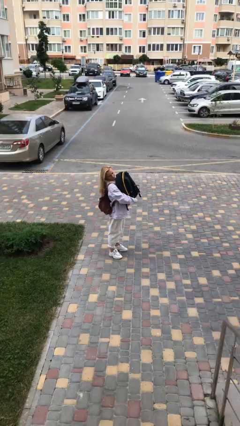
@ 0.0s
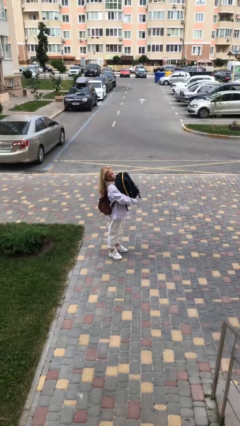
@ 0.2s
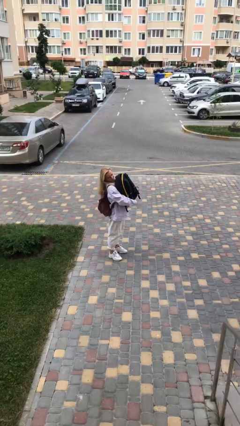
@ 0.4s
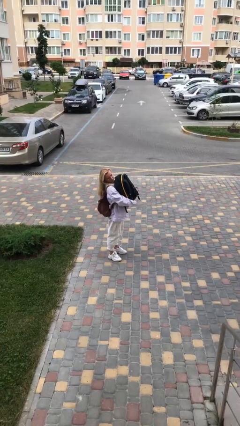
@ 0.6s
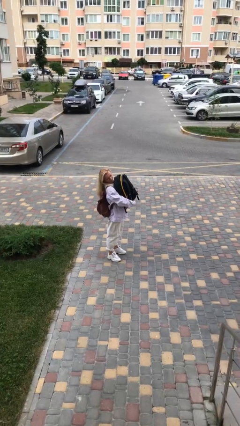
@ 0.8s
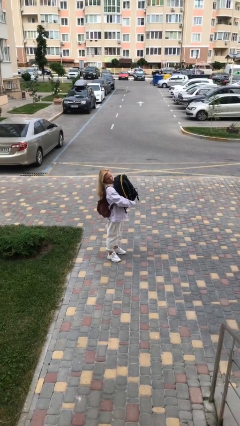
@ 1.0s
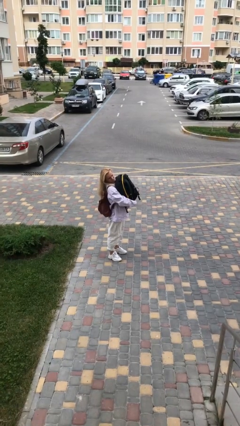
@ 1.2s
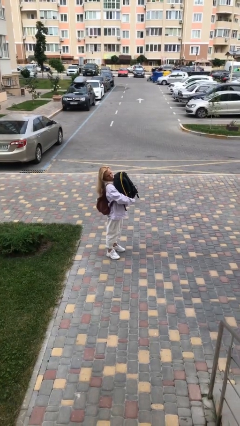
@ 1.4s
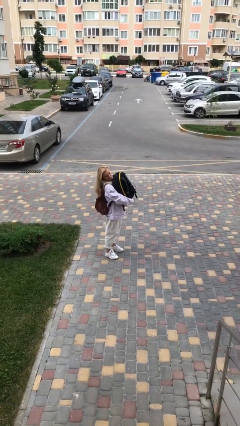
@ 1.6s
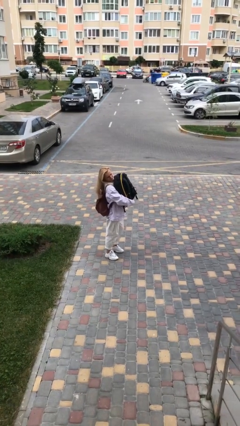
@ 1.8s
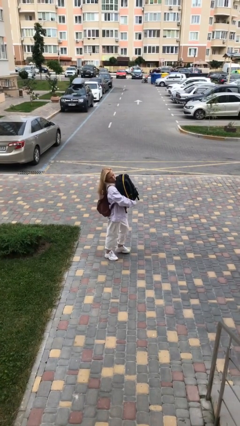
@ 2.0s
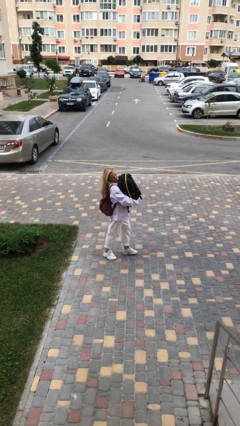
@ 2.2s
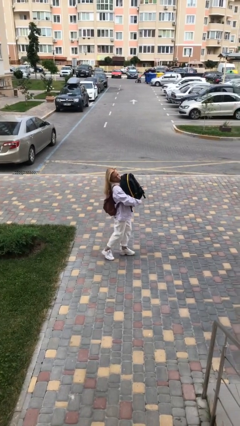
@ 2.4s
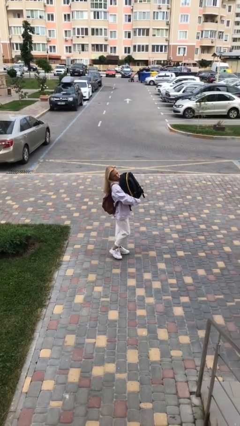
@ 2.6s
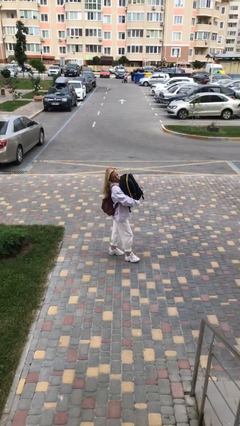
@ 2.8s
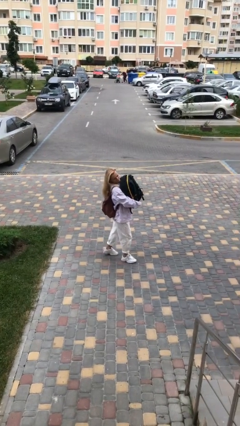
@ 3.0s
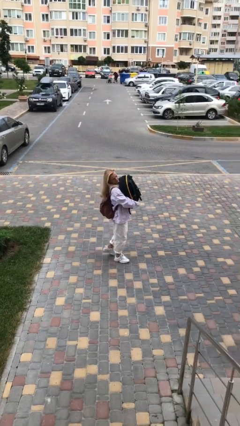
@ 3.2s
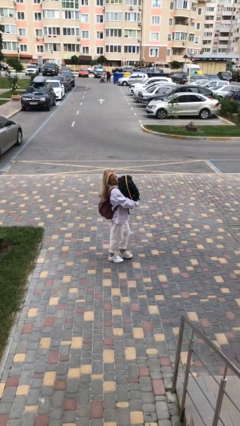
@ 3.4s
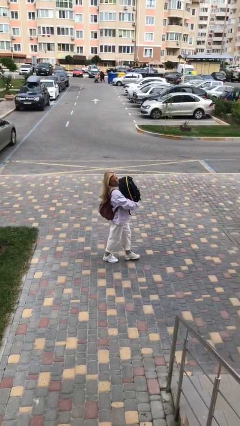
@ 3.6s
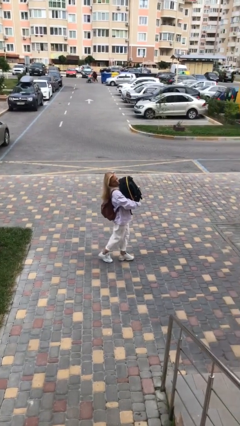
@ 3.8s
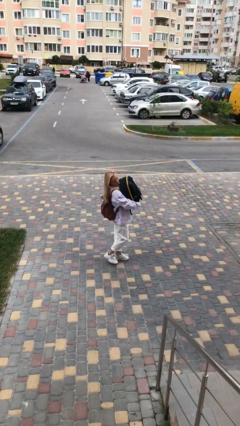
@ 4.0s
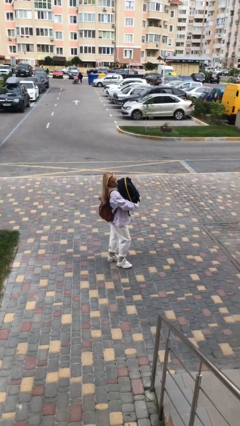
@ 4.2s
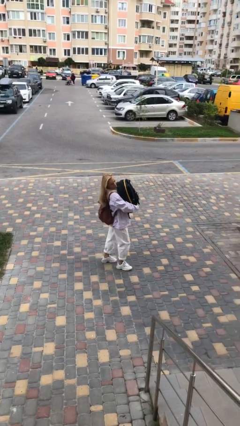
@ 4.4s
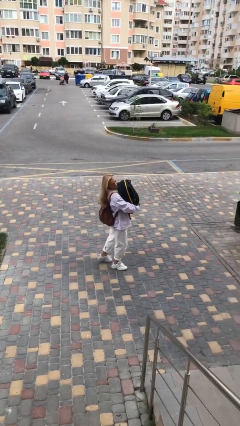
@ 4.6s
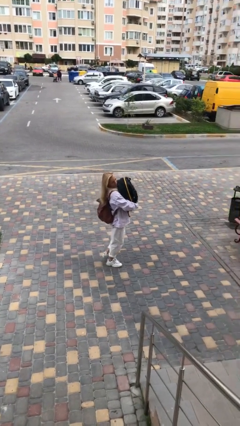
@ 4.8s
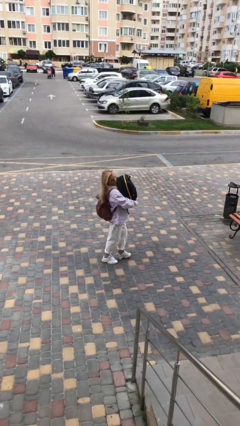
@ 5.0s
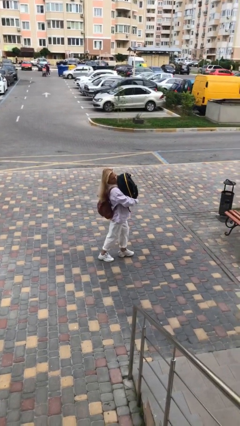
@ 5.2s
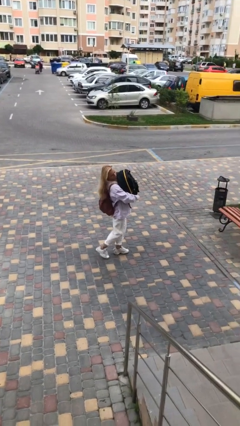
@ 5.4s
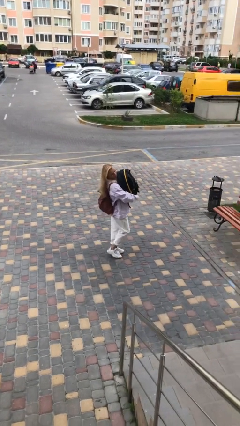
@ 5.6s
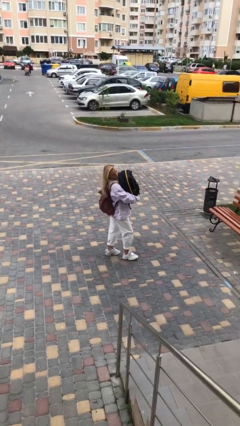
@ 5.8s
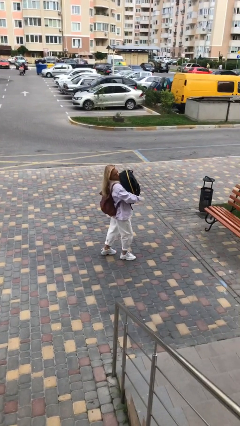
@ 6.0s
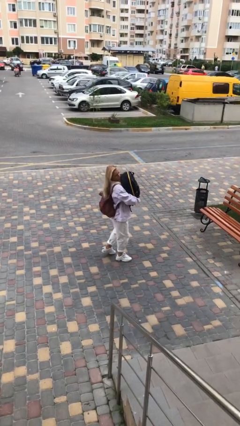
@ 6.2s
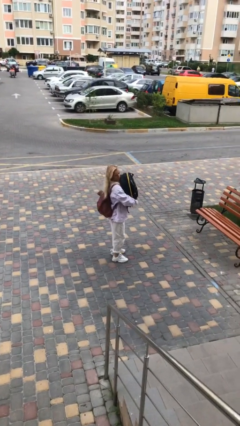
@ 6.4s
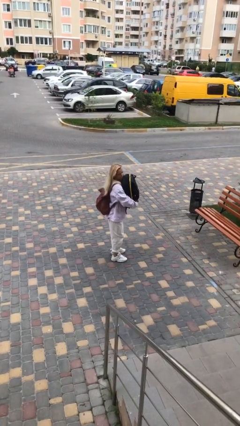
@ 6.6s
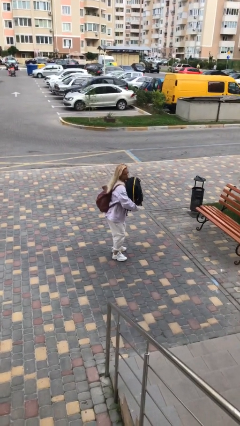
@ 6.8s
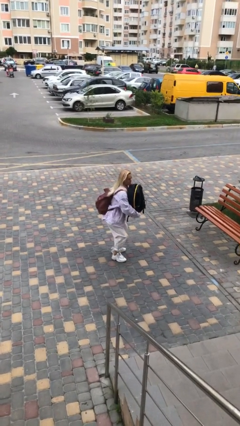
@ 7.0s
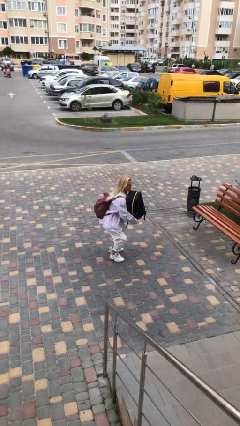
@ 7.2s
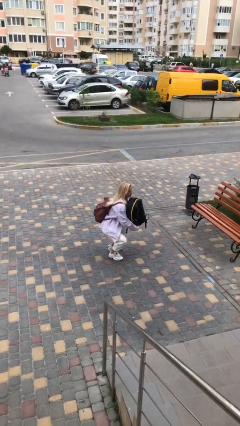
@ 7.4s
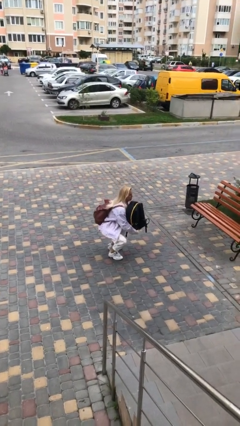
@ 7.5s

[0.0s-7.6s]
person carries heavy object

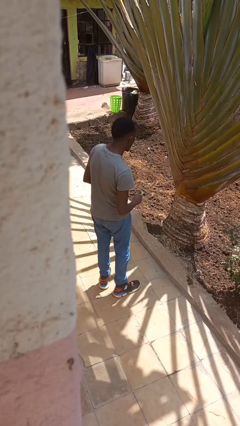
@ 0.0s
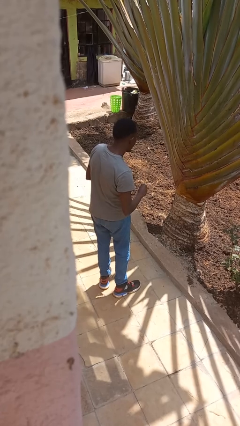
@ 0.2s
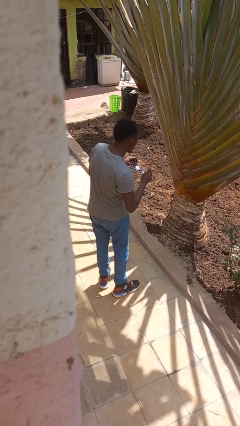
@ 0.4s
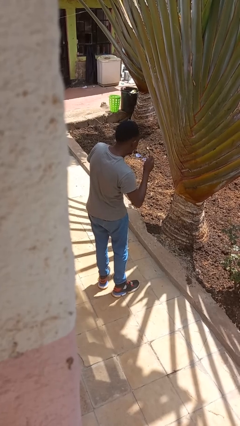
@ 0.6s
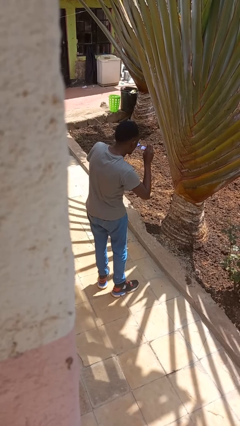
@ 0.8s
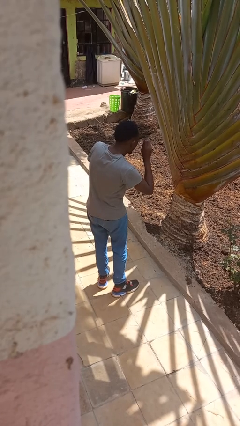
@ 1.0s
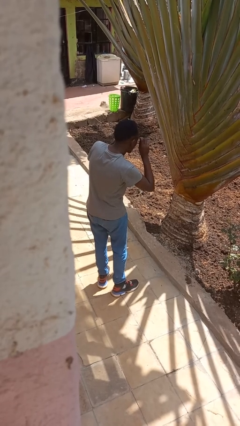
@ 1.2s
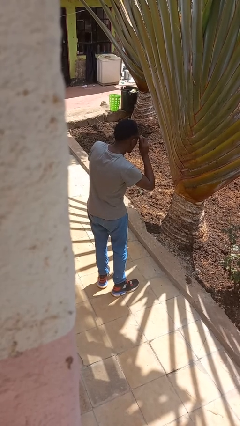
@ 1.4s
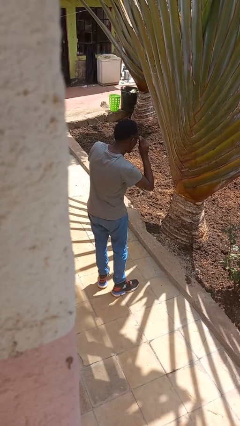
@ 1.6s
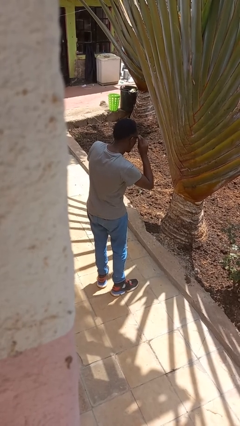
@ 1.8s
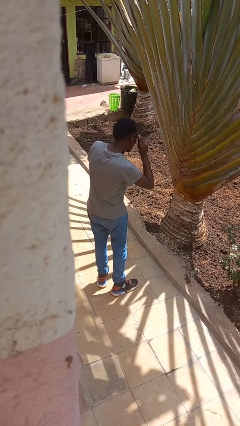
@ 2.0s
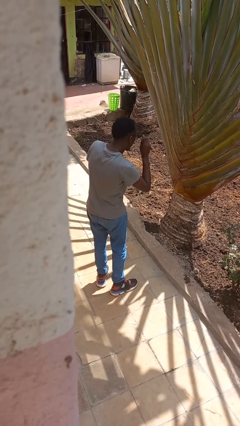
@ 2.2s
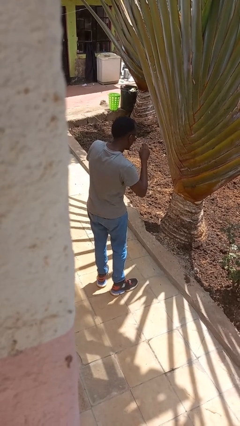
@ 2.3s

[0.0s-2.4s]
person puts on glasses

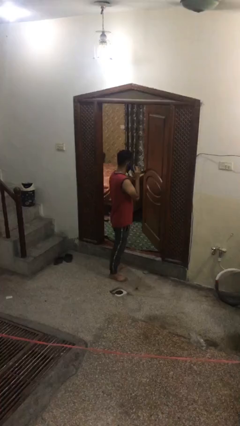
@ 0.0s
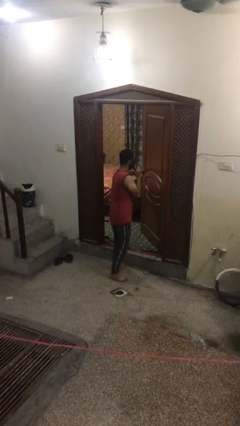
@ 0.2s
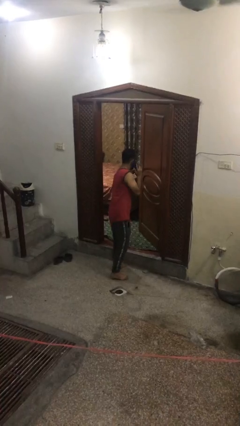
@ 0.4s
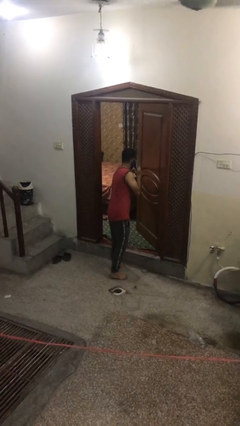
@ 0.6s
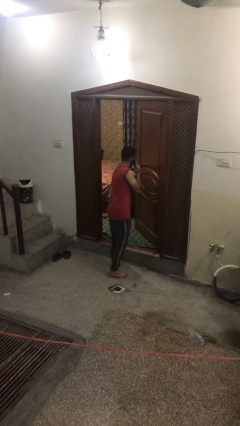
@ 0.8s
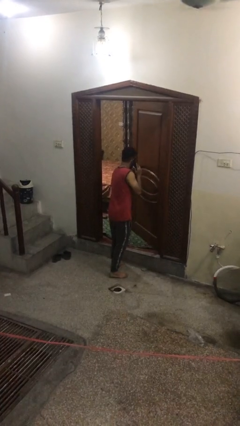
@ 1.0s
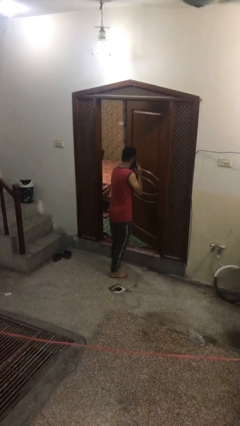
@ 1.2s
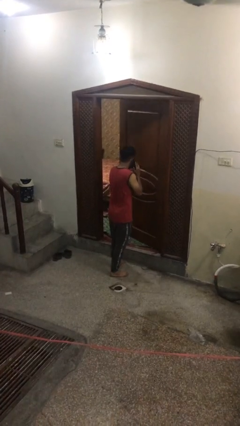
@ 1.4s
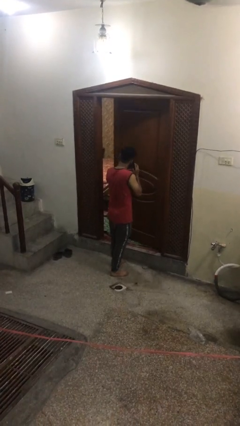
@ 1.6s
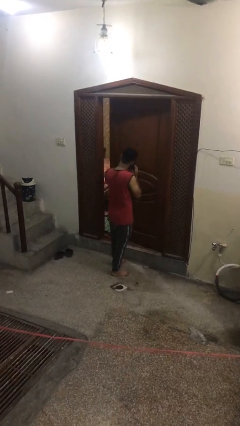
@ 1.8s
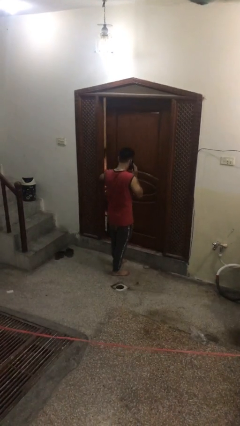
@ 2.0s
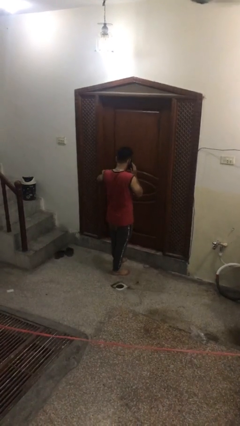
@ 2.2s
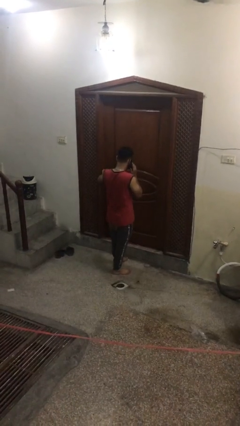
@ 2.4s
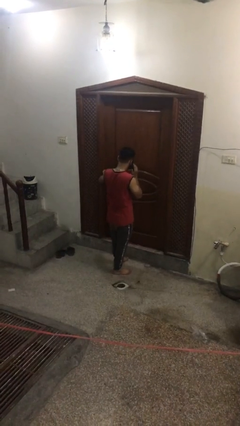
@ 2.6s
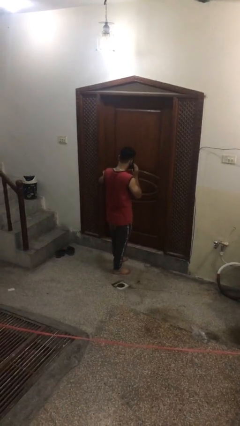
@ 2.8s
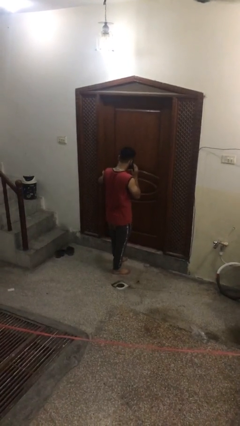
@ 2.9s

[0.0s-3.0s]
person closes facility door

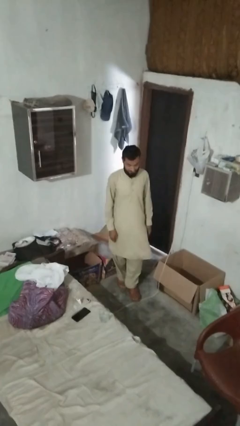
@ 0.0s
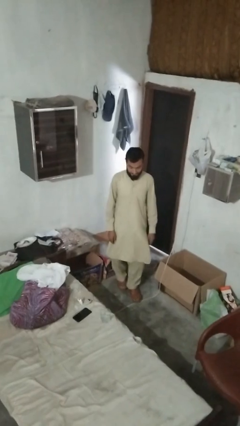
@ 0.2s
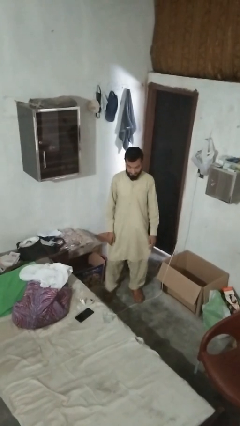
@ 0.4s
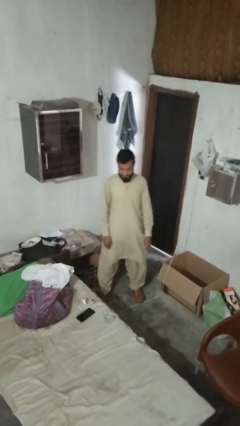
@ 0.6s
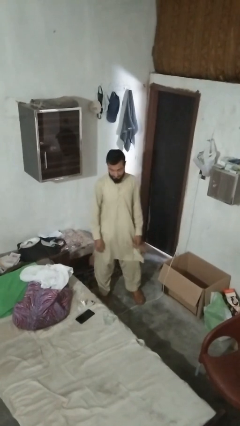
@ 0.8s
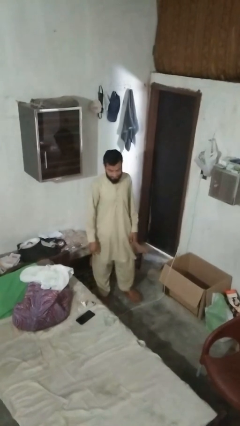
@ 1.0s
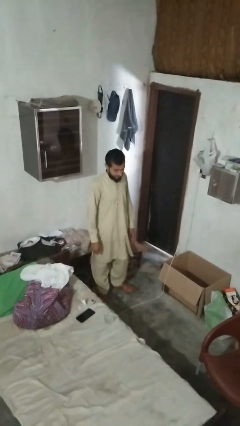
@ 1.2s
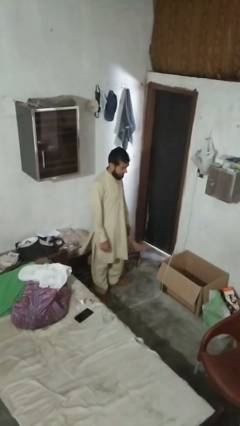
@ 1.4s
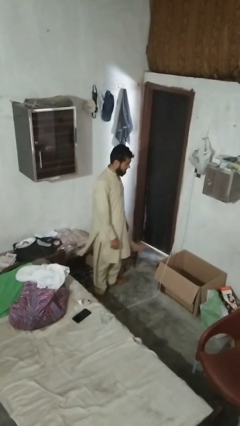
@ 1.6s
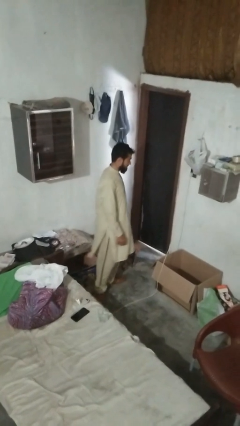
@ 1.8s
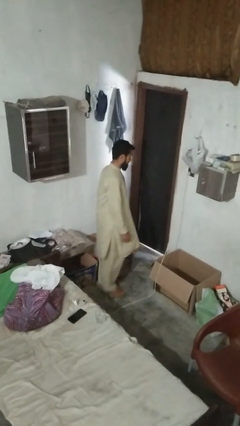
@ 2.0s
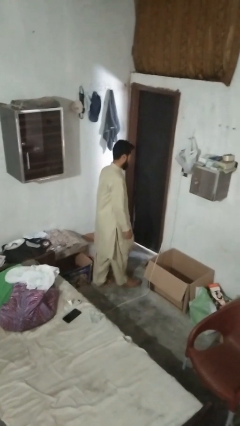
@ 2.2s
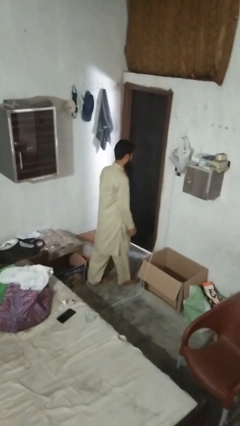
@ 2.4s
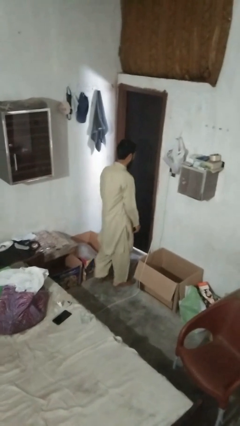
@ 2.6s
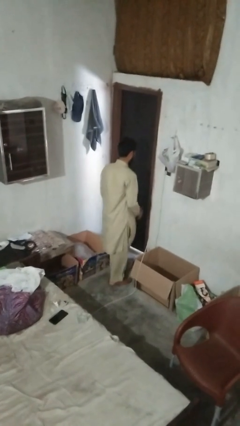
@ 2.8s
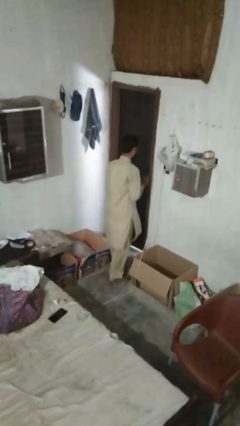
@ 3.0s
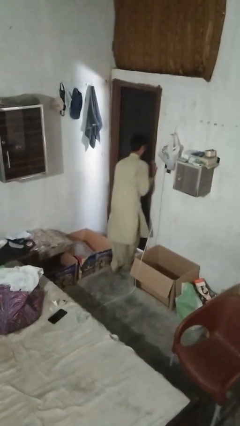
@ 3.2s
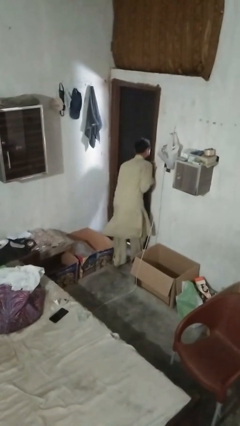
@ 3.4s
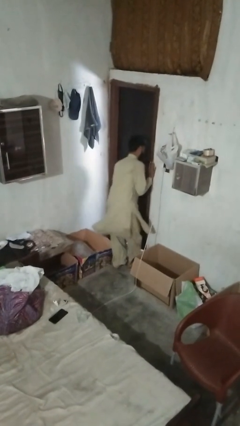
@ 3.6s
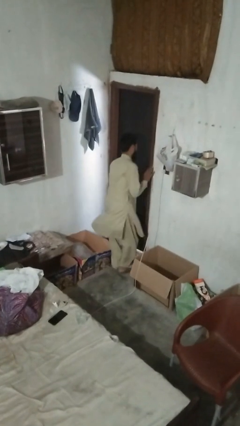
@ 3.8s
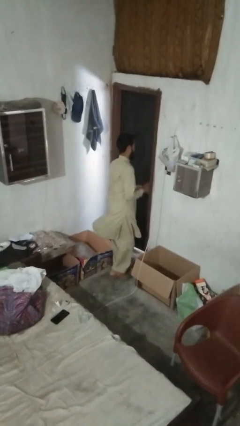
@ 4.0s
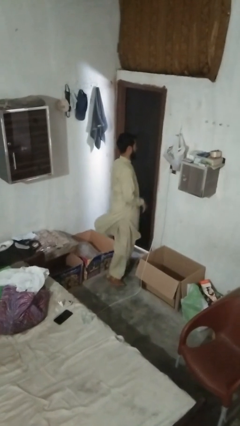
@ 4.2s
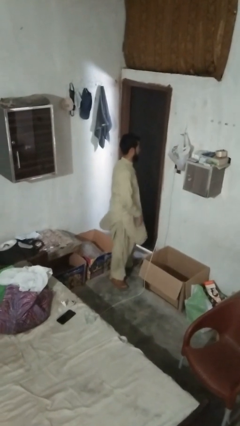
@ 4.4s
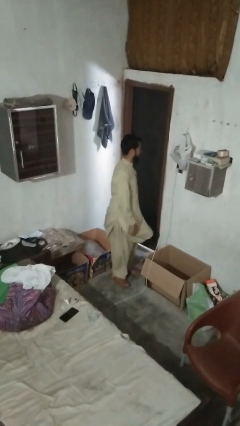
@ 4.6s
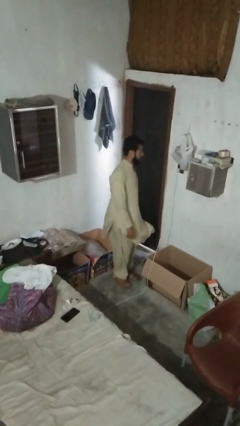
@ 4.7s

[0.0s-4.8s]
person bumps into wall
